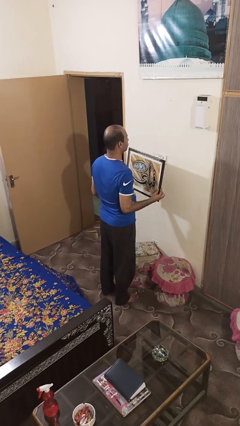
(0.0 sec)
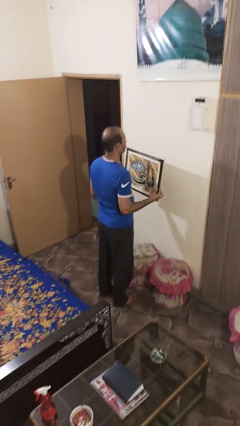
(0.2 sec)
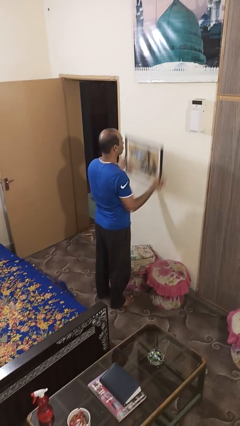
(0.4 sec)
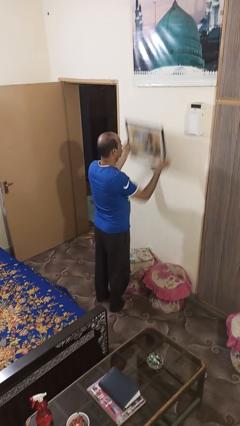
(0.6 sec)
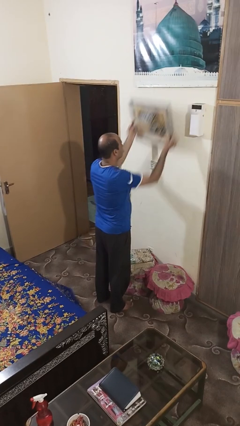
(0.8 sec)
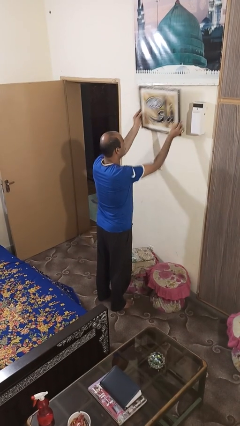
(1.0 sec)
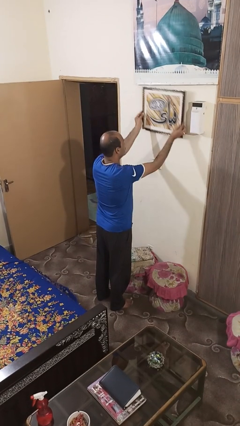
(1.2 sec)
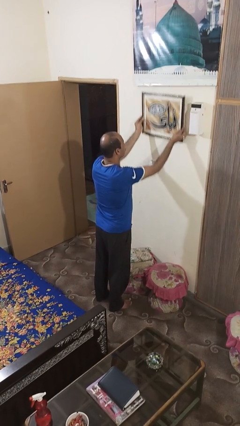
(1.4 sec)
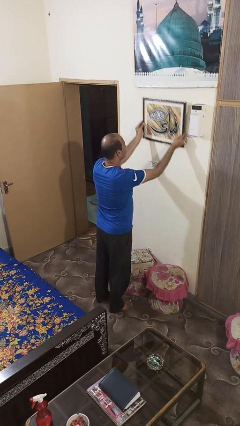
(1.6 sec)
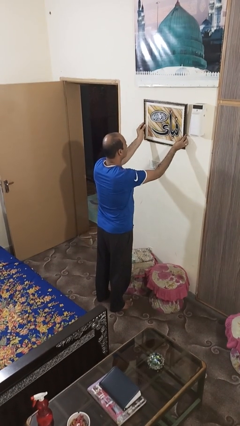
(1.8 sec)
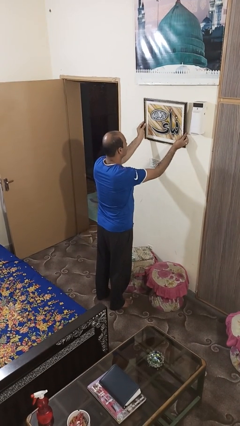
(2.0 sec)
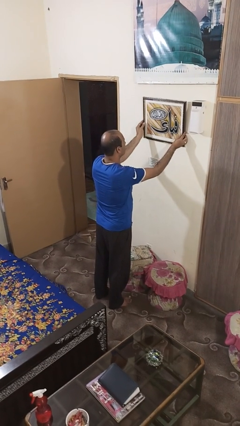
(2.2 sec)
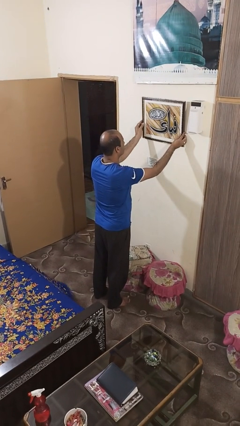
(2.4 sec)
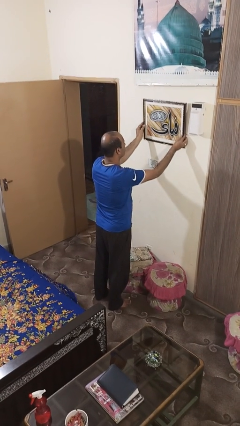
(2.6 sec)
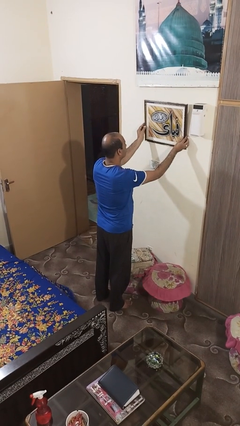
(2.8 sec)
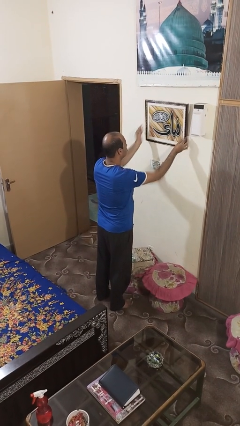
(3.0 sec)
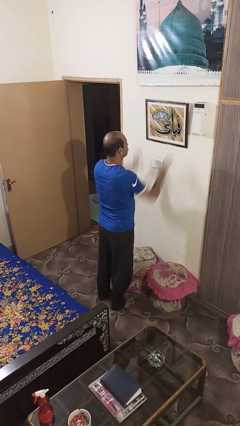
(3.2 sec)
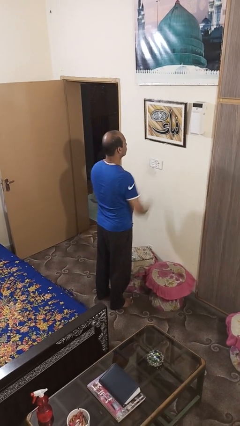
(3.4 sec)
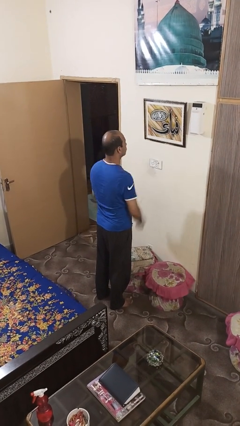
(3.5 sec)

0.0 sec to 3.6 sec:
person puts up picture frame

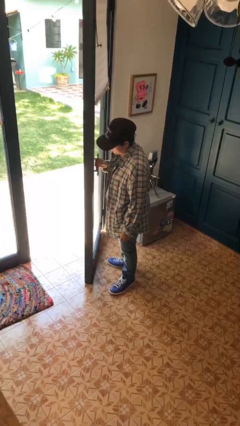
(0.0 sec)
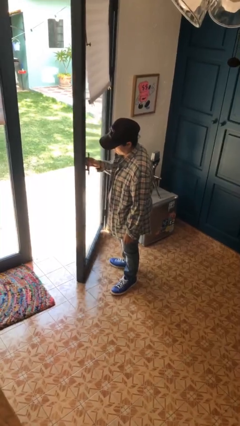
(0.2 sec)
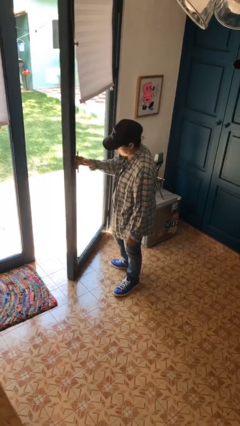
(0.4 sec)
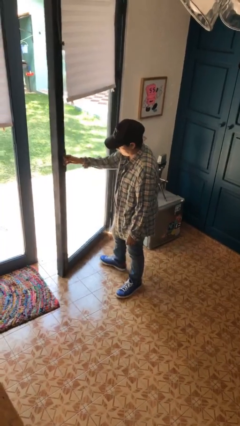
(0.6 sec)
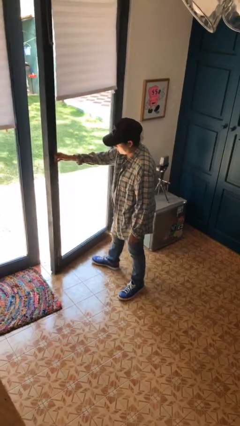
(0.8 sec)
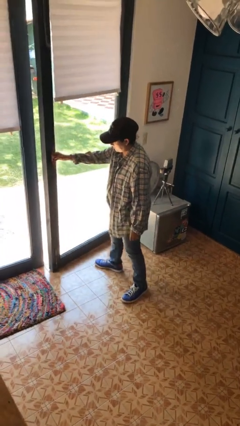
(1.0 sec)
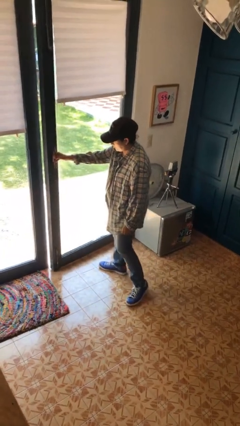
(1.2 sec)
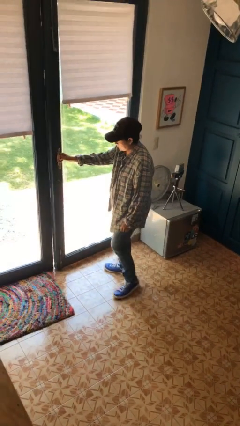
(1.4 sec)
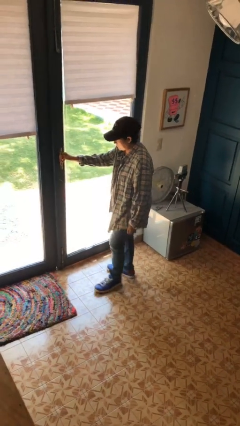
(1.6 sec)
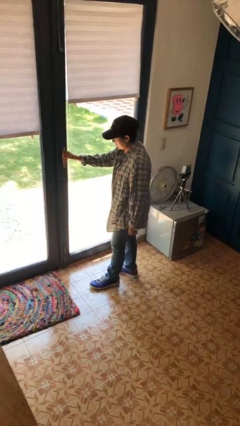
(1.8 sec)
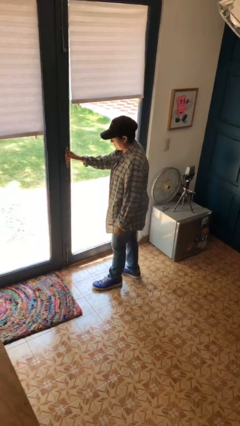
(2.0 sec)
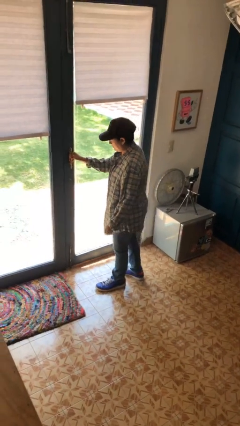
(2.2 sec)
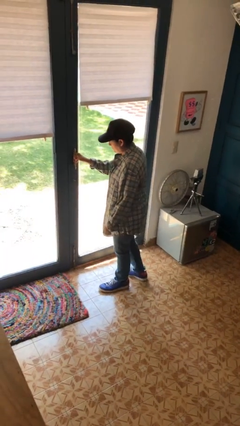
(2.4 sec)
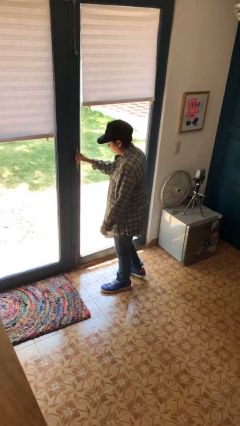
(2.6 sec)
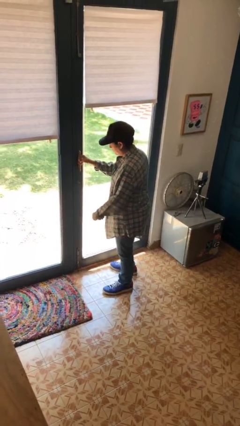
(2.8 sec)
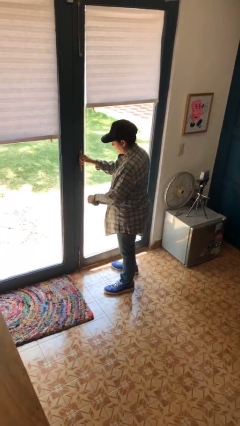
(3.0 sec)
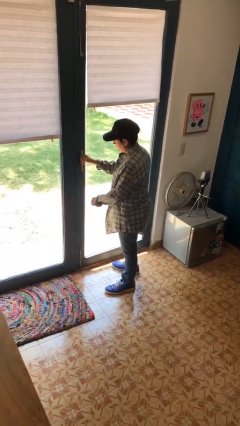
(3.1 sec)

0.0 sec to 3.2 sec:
person closes facility door

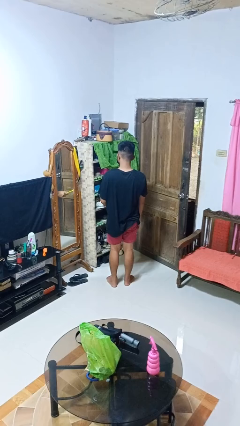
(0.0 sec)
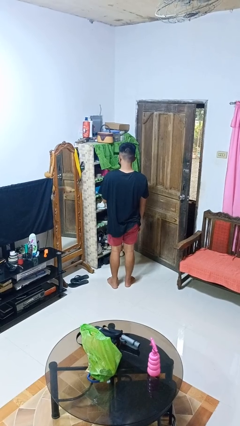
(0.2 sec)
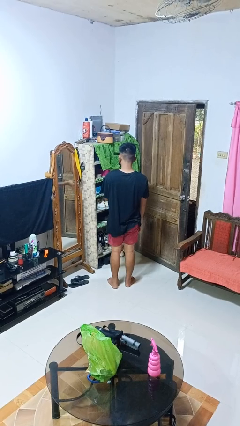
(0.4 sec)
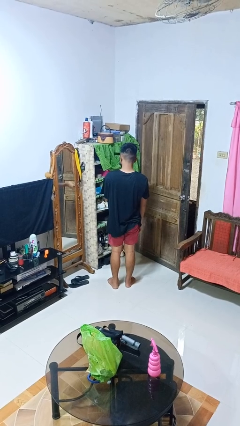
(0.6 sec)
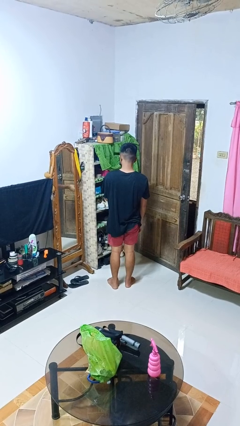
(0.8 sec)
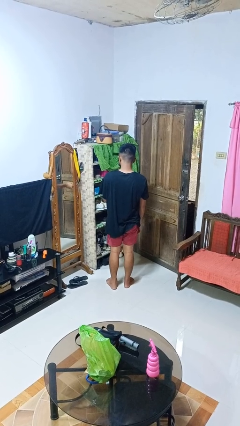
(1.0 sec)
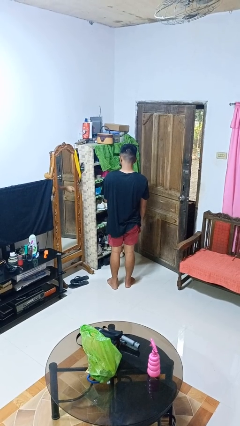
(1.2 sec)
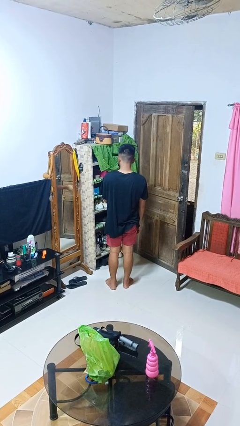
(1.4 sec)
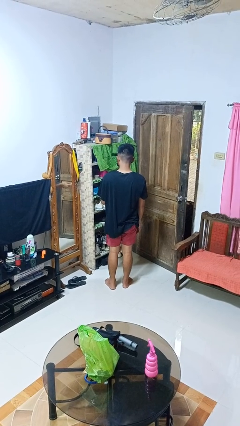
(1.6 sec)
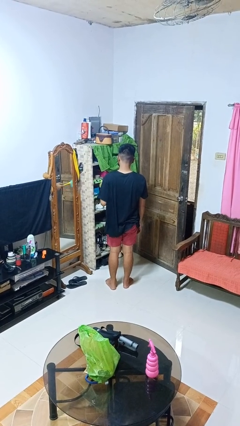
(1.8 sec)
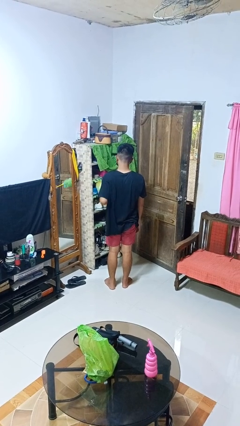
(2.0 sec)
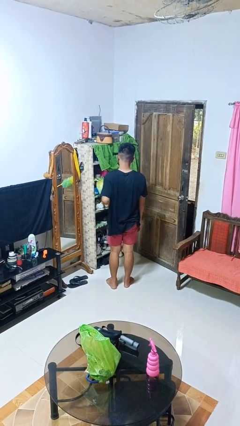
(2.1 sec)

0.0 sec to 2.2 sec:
person dusts furniture

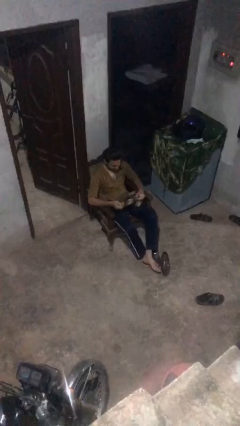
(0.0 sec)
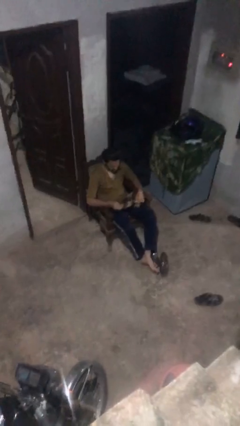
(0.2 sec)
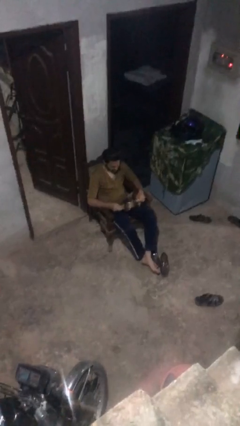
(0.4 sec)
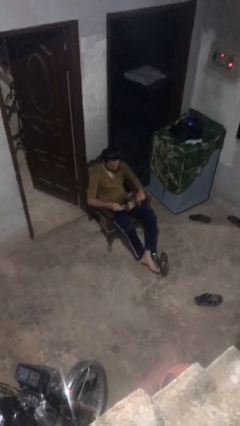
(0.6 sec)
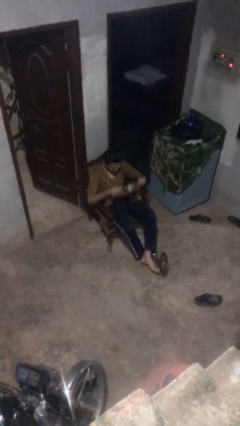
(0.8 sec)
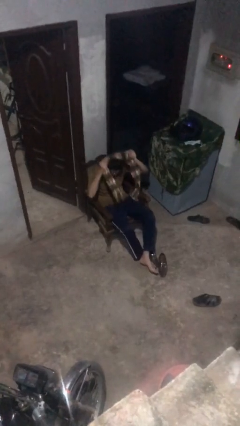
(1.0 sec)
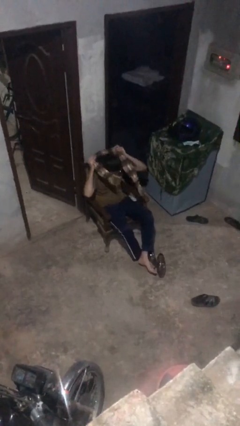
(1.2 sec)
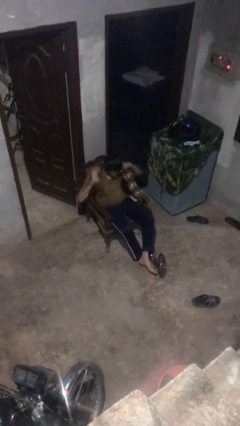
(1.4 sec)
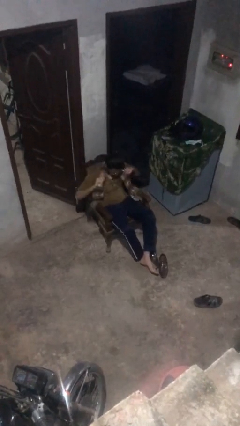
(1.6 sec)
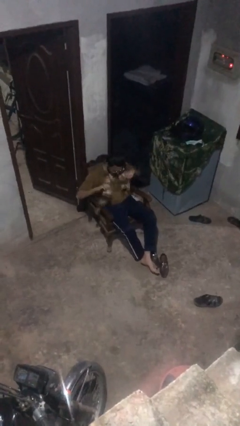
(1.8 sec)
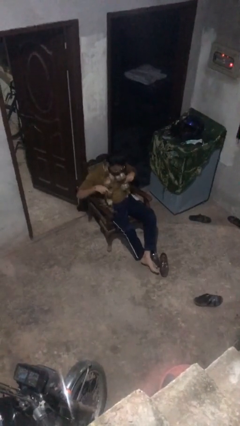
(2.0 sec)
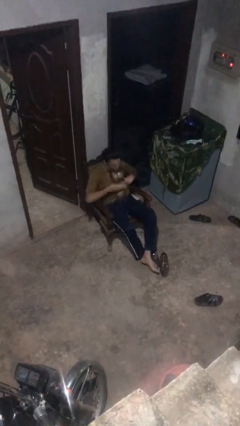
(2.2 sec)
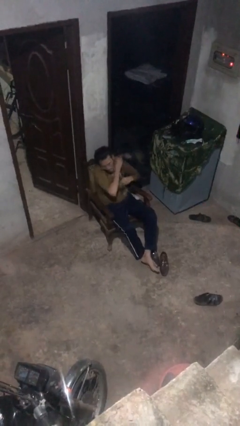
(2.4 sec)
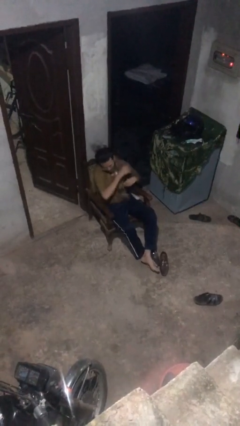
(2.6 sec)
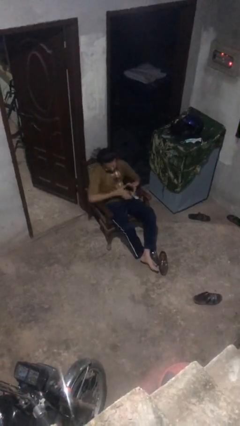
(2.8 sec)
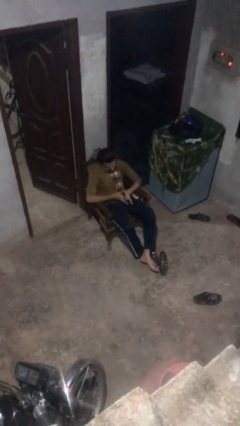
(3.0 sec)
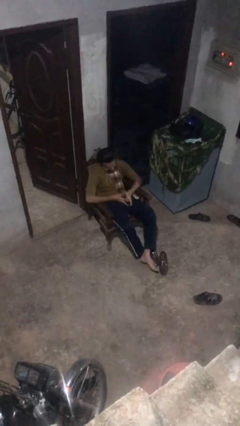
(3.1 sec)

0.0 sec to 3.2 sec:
person puts on scarf

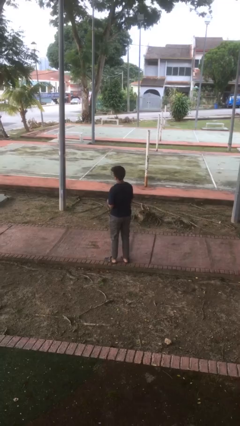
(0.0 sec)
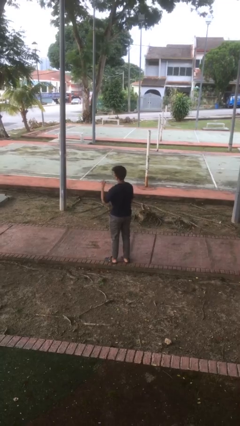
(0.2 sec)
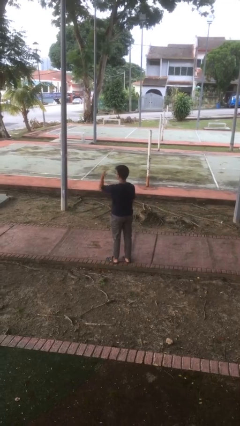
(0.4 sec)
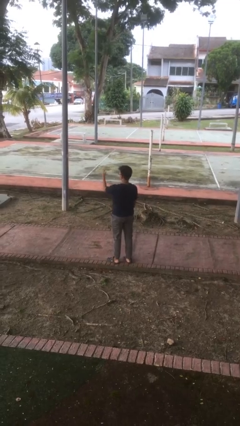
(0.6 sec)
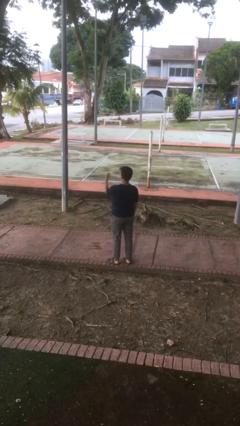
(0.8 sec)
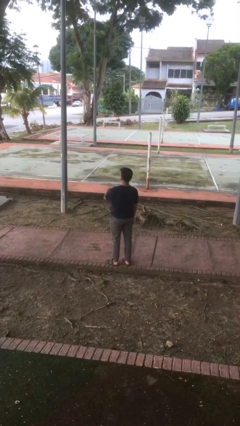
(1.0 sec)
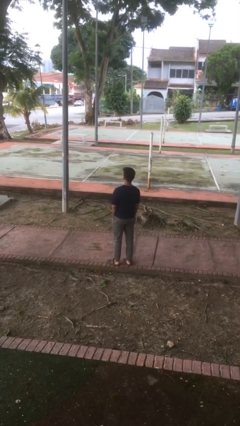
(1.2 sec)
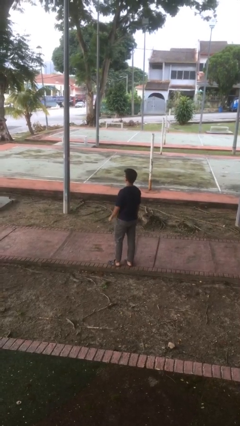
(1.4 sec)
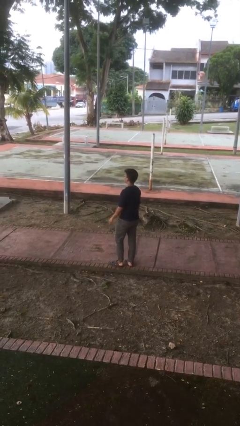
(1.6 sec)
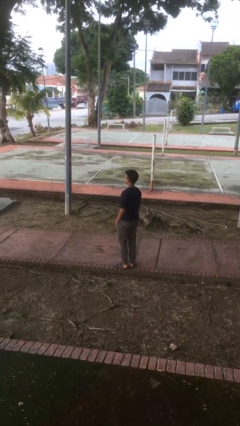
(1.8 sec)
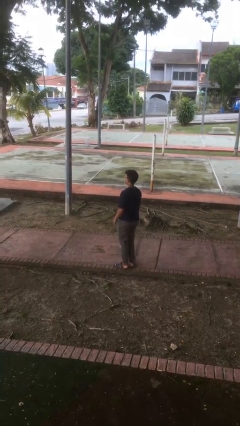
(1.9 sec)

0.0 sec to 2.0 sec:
person karate chop

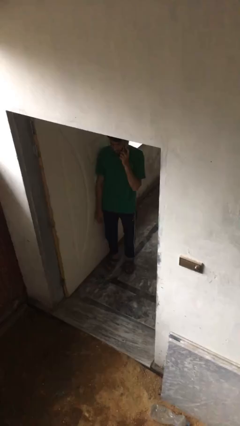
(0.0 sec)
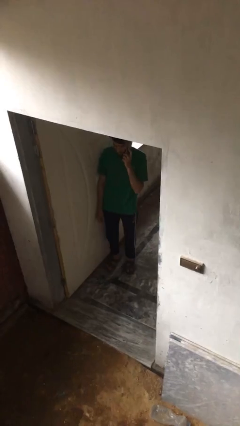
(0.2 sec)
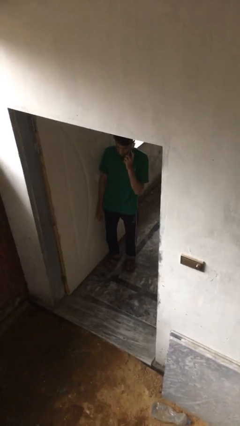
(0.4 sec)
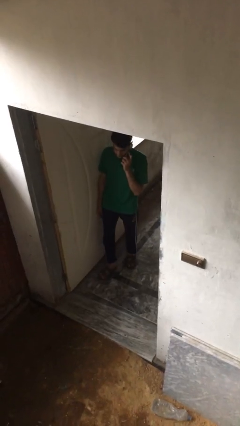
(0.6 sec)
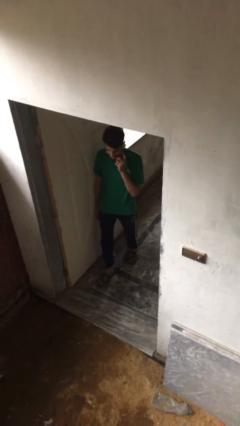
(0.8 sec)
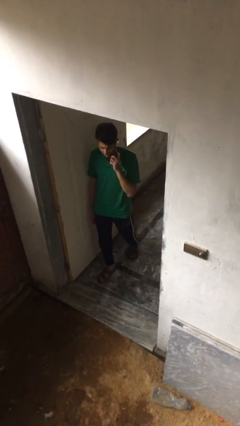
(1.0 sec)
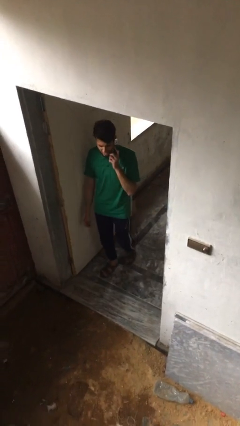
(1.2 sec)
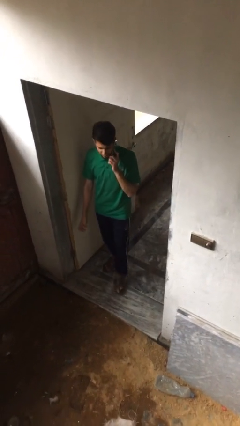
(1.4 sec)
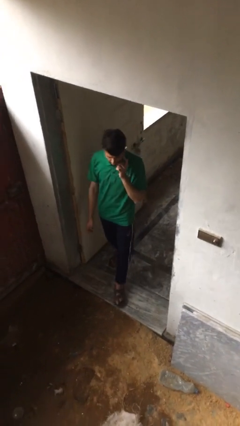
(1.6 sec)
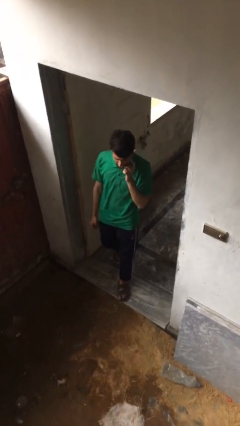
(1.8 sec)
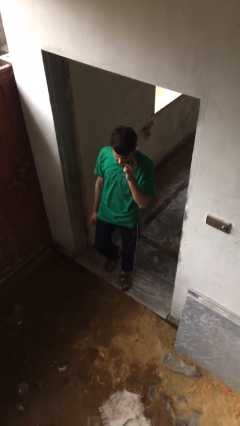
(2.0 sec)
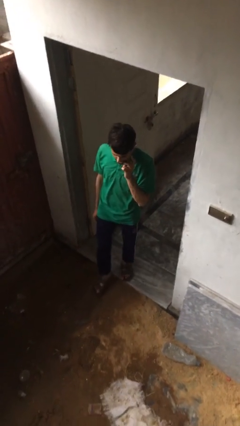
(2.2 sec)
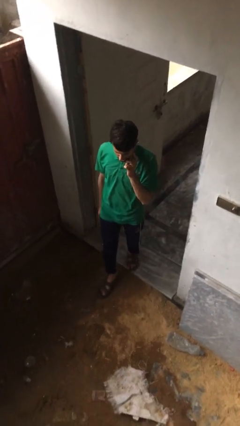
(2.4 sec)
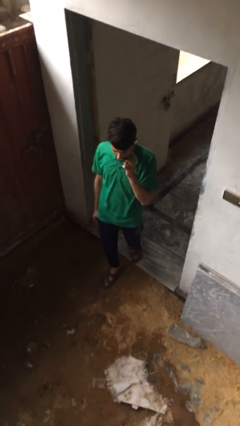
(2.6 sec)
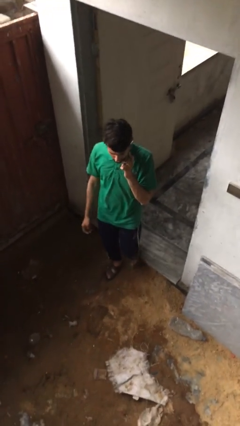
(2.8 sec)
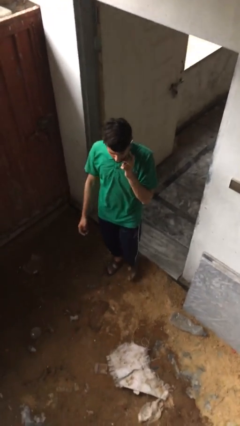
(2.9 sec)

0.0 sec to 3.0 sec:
person enters scene through structure

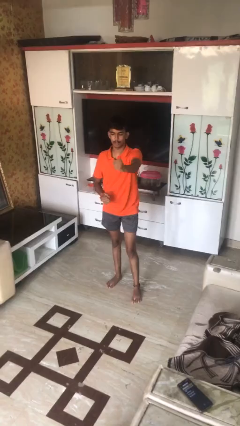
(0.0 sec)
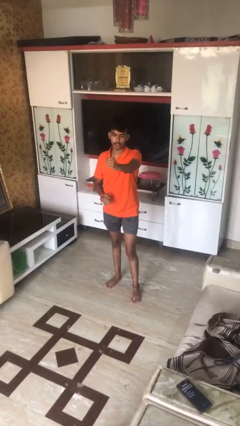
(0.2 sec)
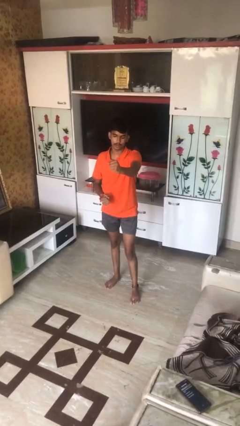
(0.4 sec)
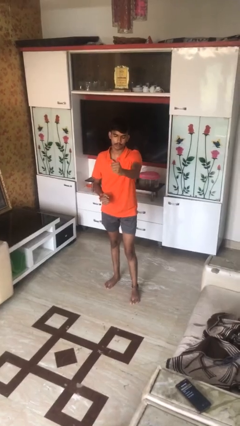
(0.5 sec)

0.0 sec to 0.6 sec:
person punches
